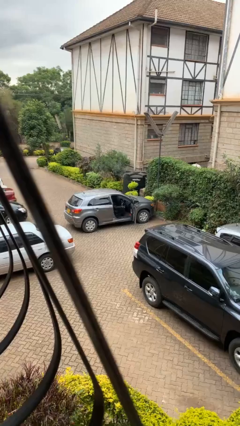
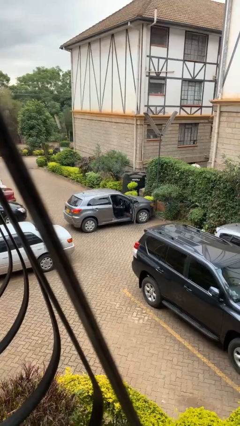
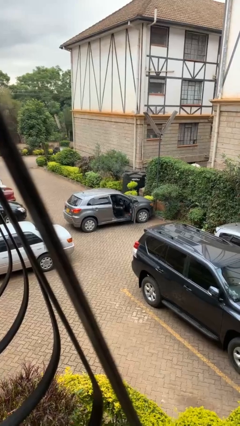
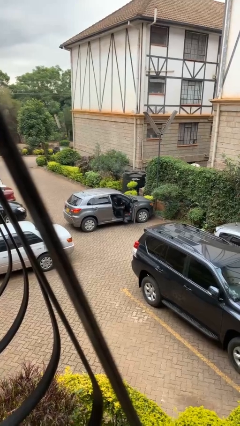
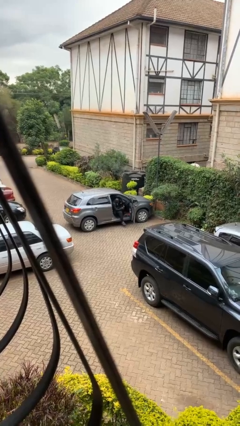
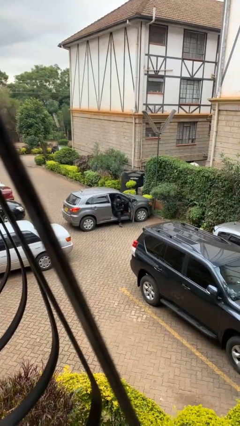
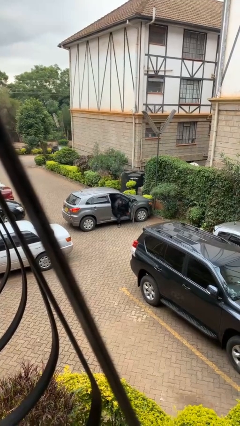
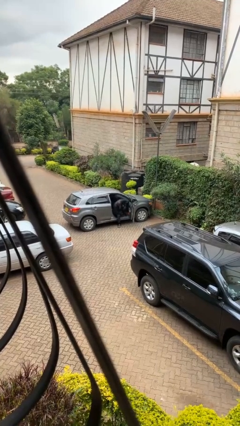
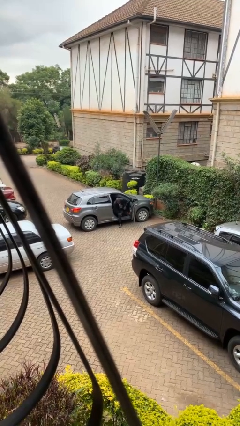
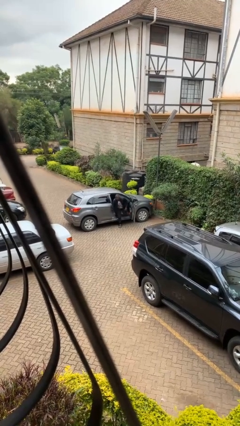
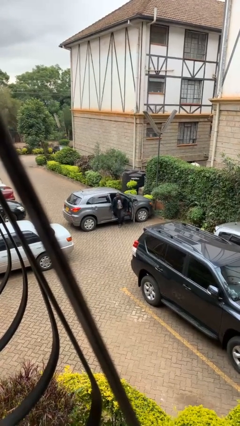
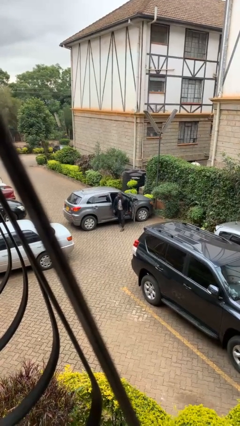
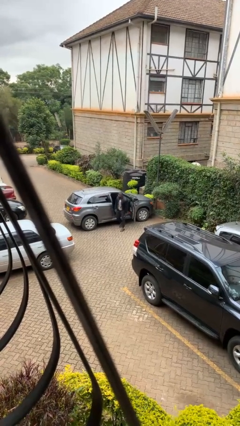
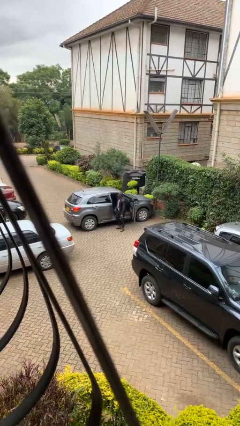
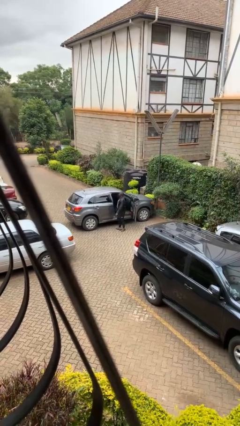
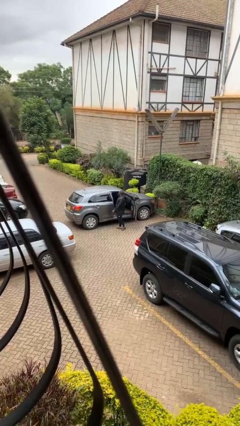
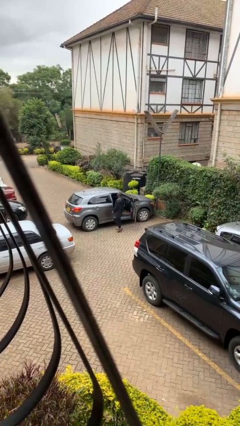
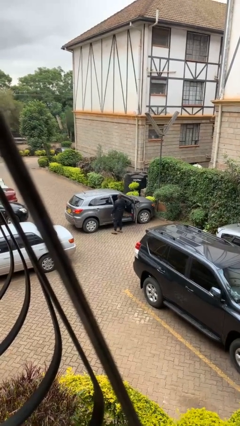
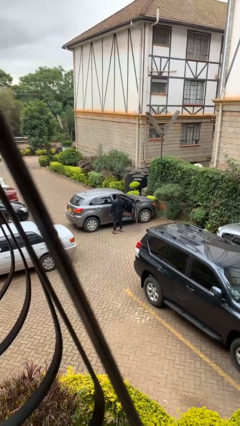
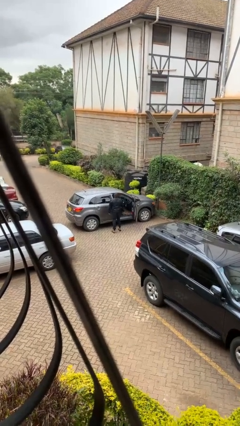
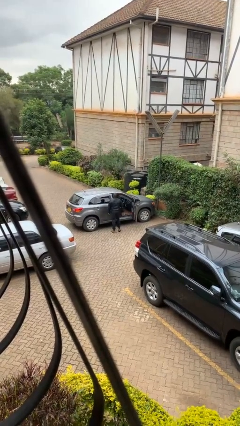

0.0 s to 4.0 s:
person exits car

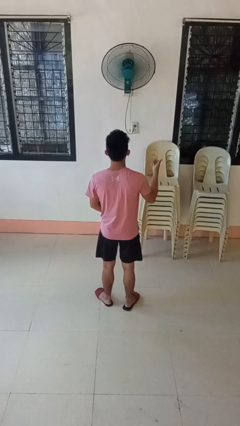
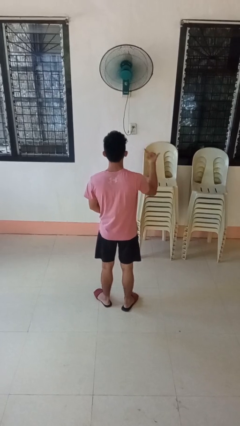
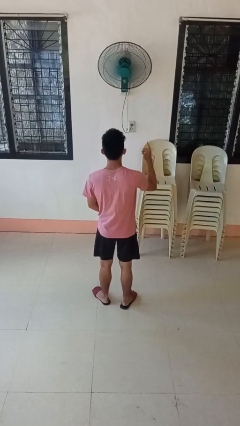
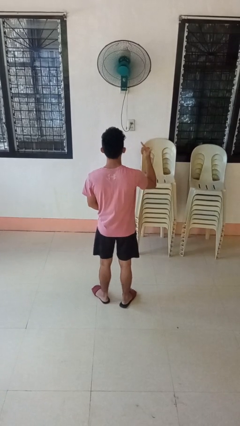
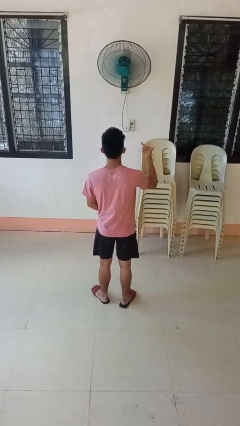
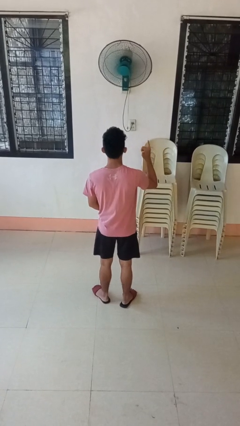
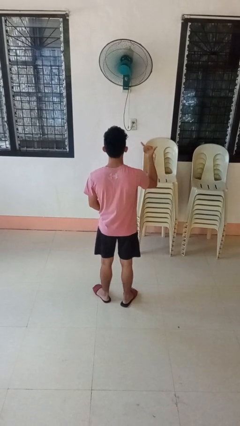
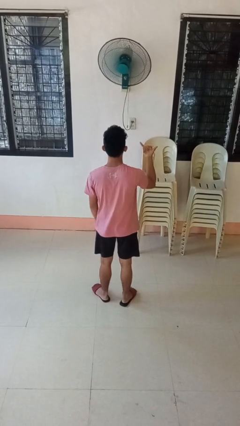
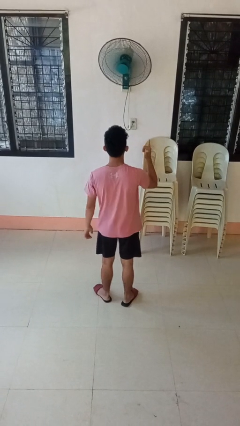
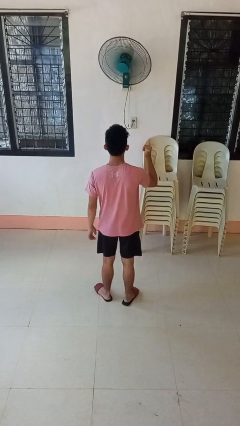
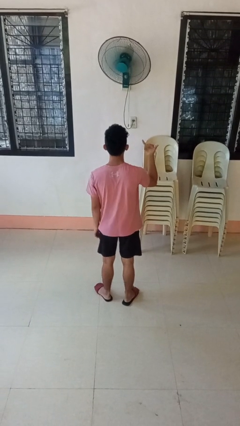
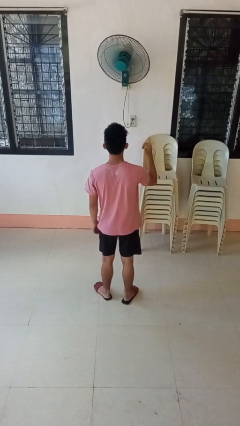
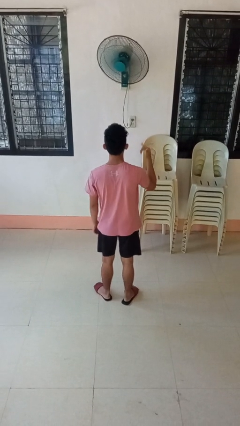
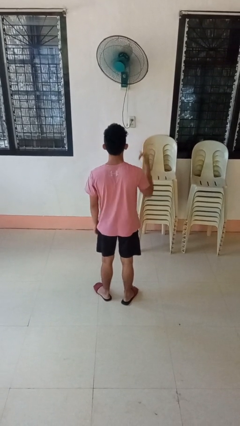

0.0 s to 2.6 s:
person gestures hang loose

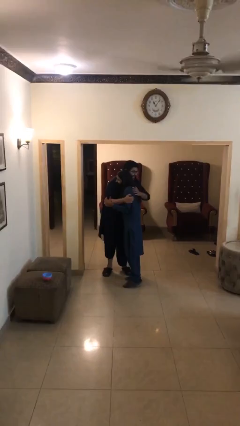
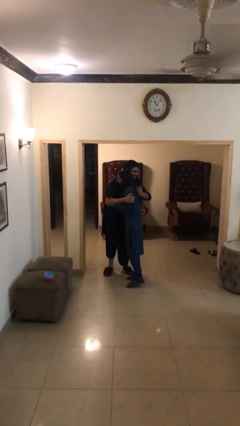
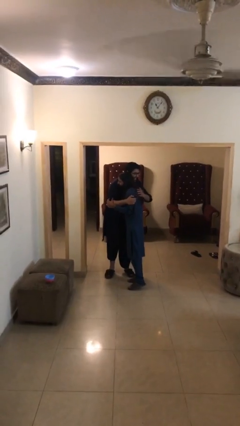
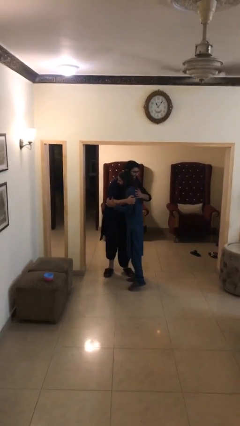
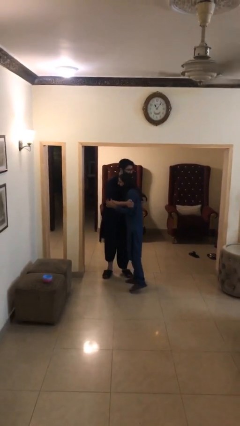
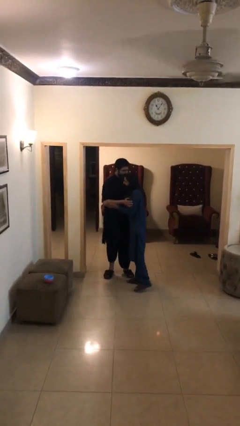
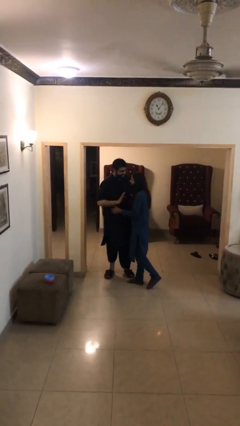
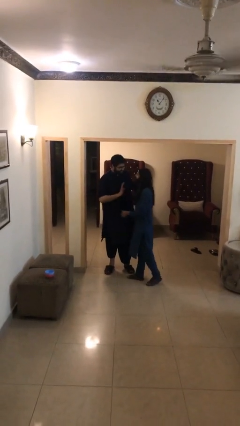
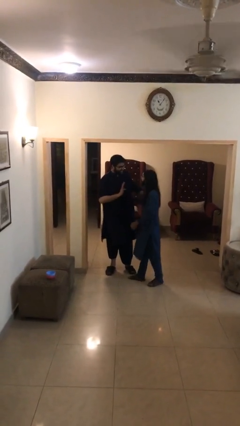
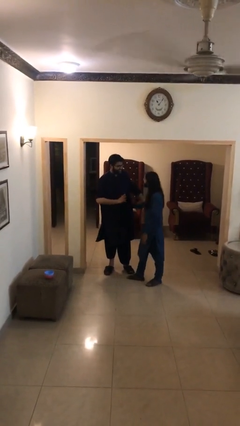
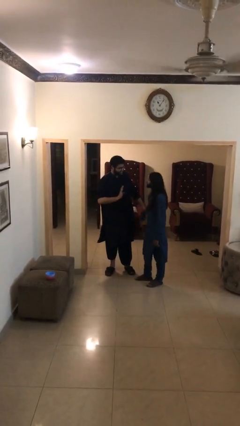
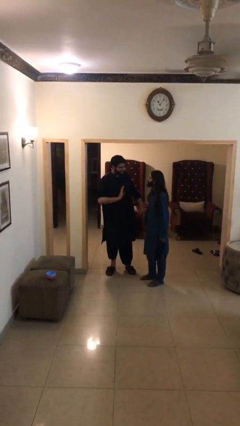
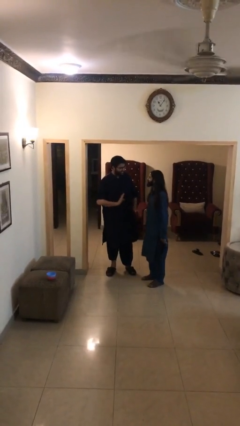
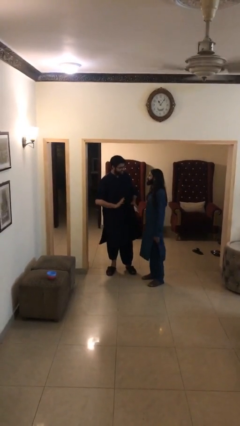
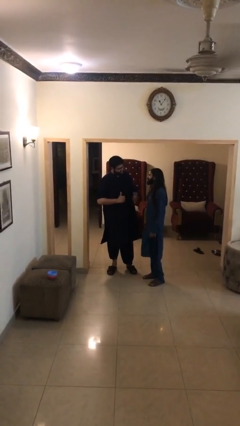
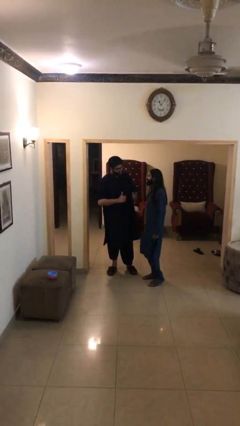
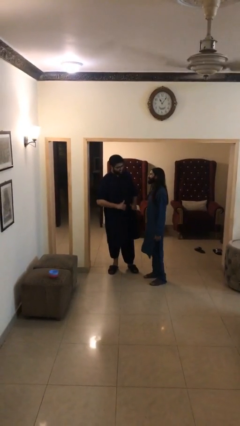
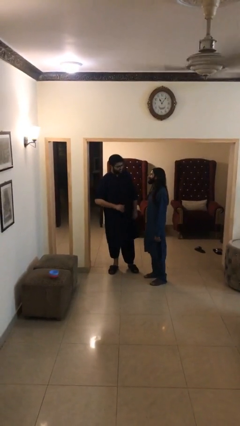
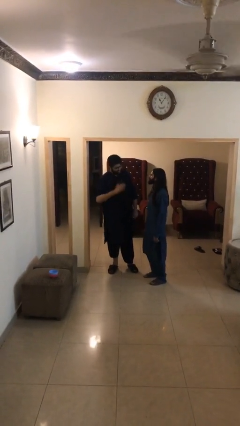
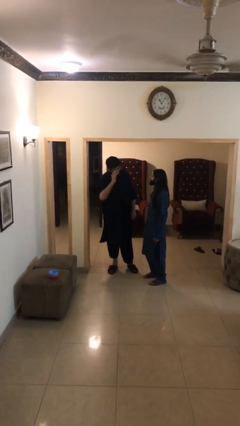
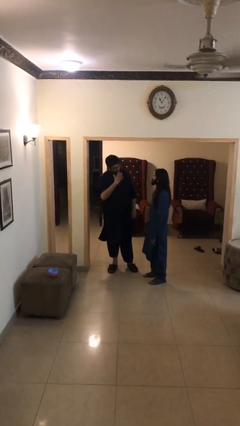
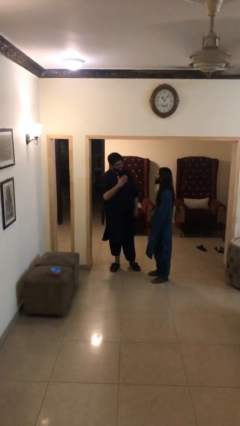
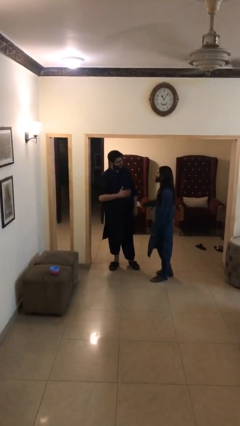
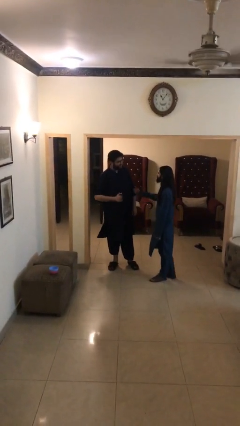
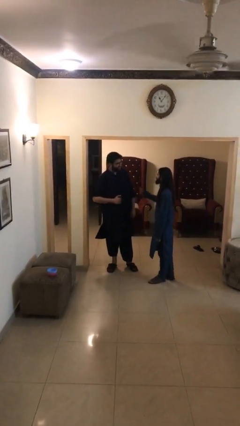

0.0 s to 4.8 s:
person talks to person

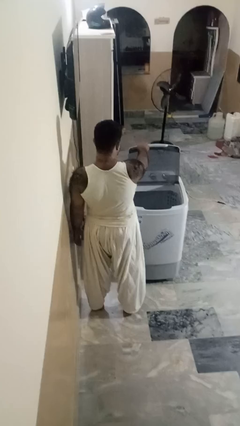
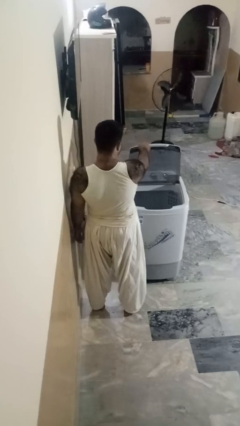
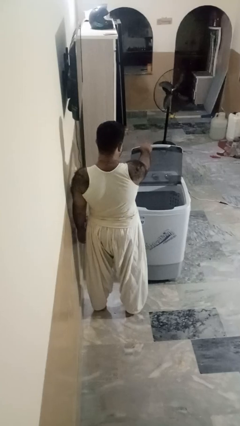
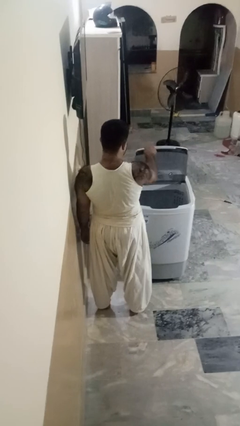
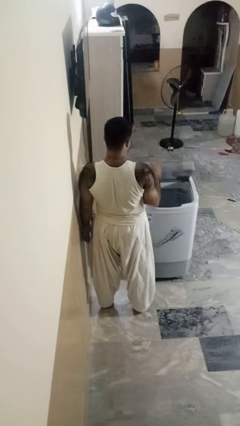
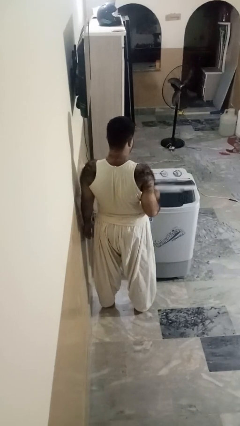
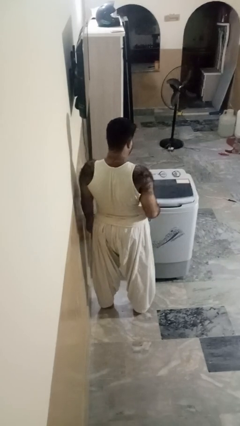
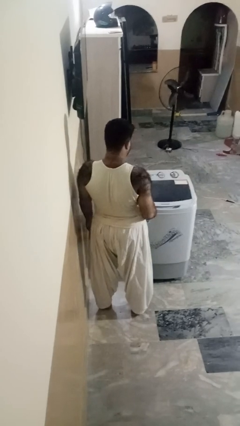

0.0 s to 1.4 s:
person closes clothes washer

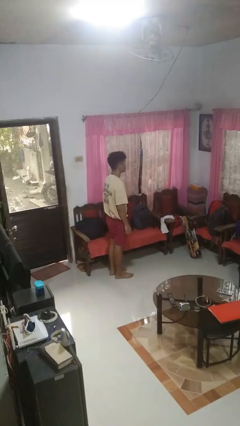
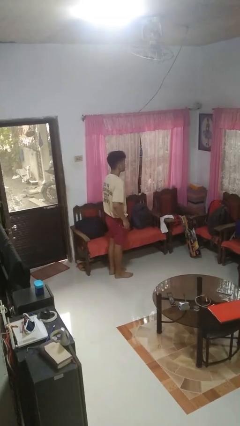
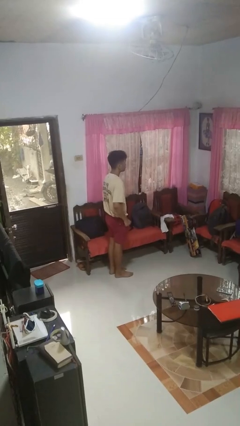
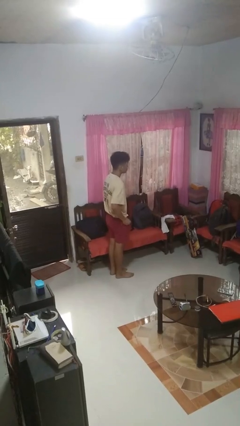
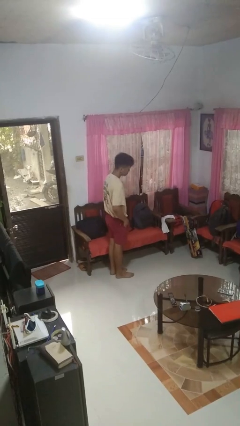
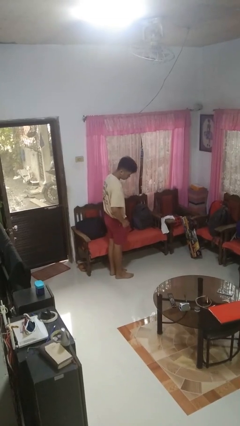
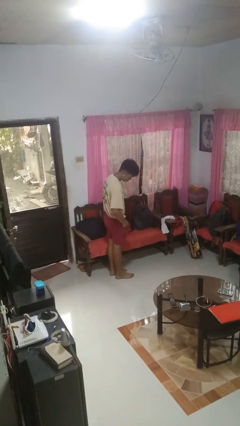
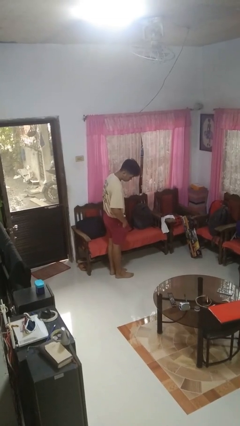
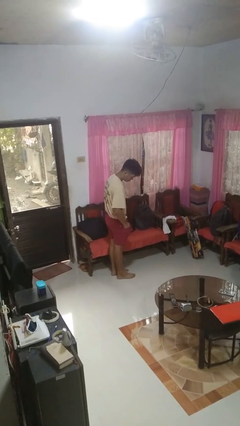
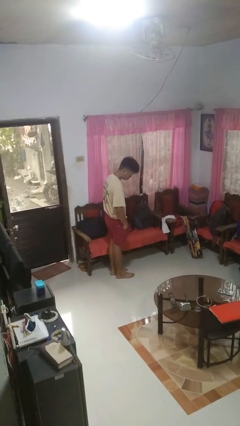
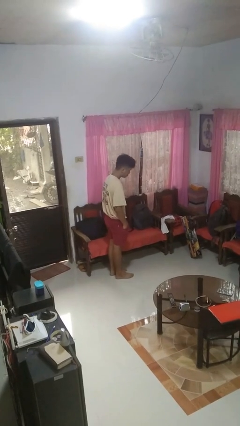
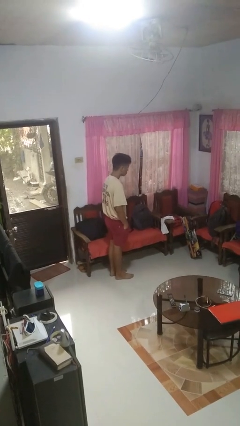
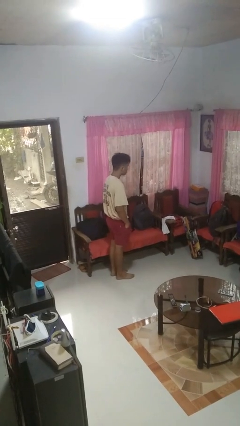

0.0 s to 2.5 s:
person puts hands in back pockets

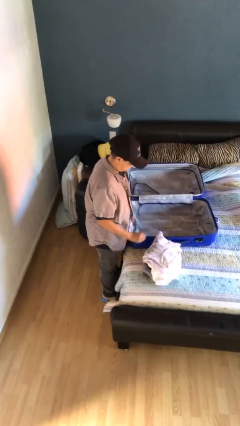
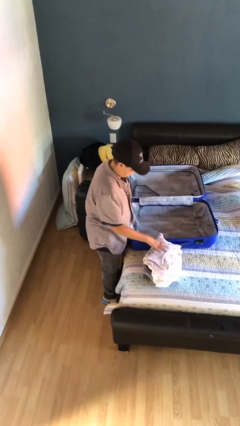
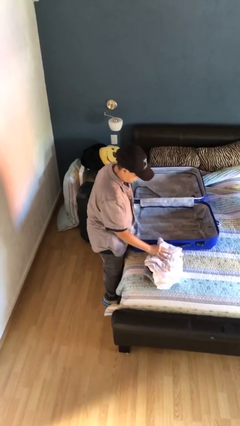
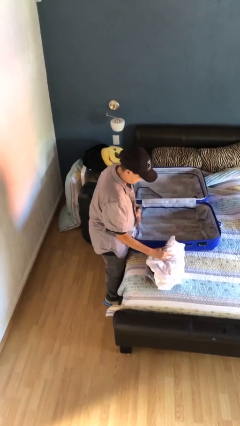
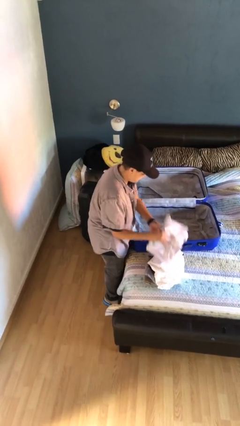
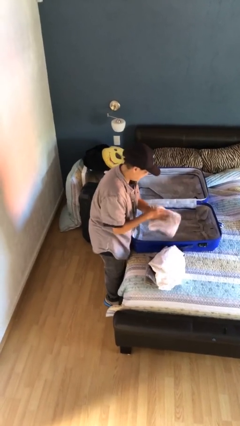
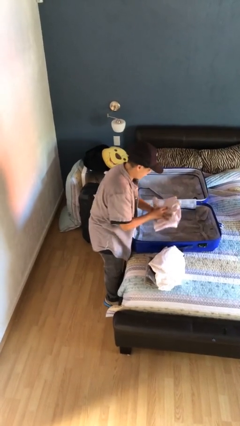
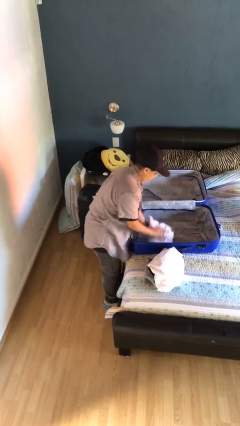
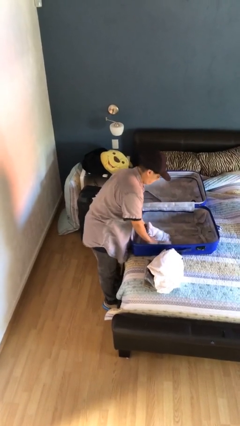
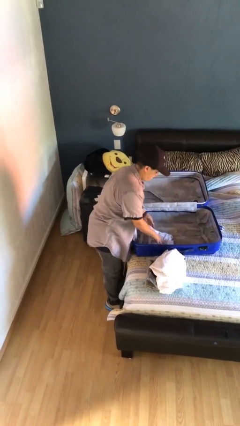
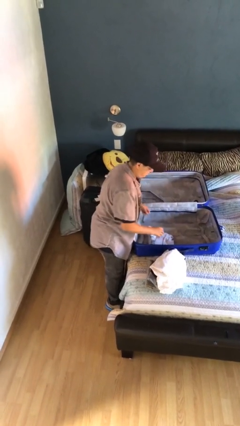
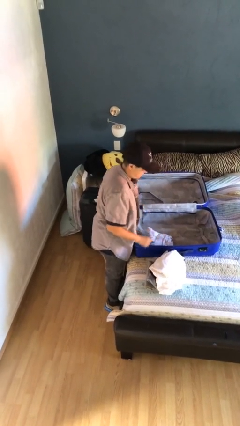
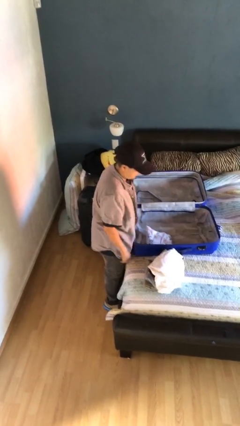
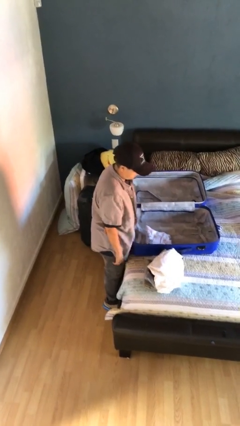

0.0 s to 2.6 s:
person loads clothes into suitcase
